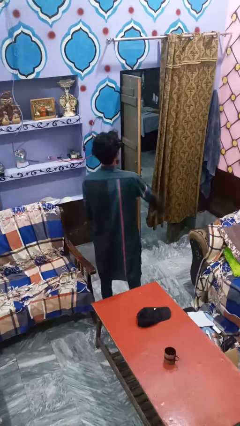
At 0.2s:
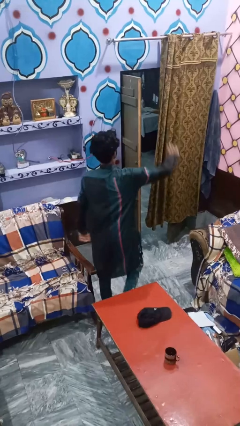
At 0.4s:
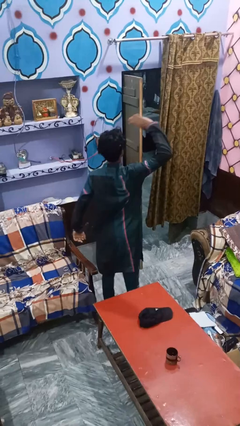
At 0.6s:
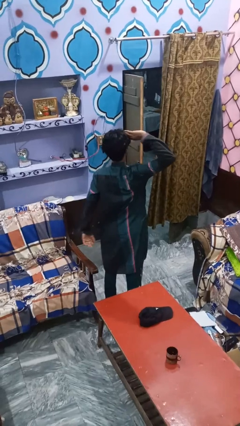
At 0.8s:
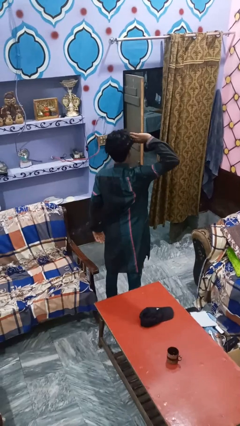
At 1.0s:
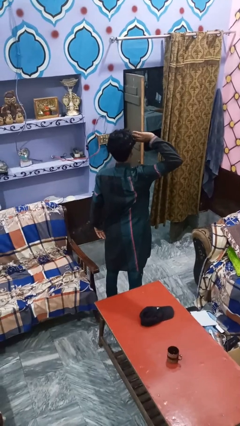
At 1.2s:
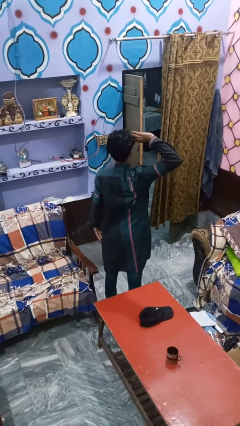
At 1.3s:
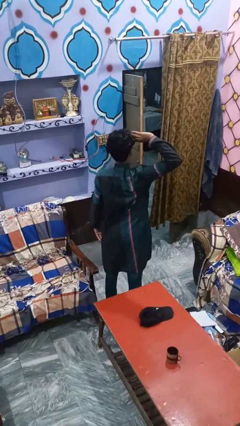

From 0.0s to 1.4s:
person salutes

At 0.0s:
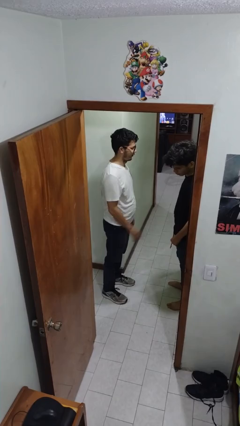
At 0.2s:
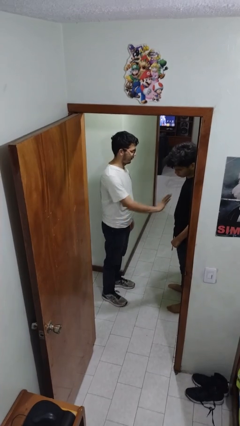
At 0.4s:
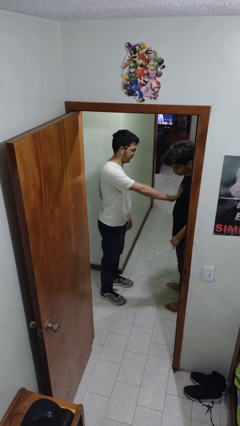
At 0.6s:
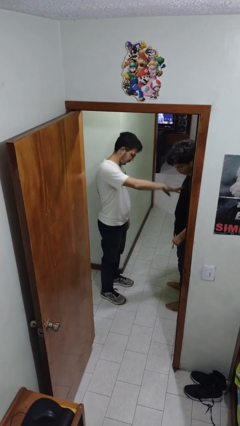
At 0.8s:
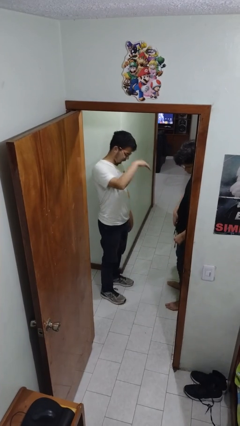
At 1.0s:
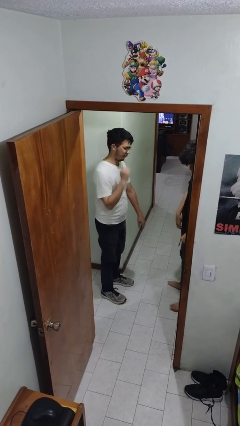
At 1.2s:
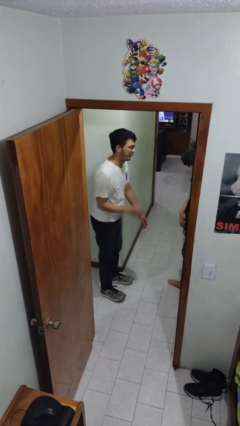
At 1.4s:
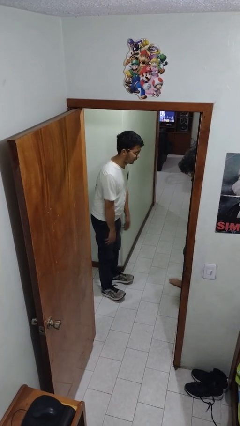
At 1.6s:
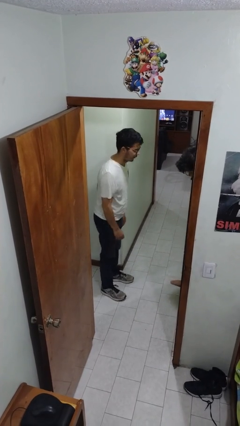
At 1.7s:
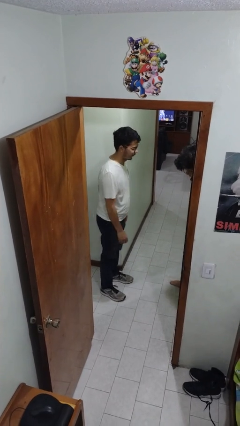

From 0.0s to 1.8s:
person shoves person

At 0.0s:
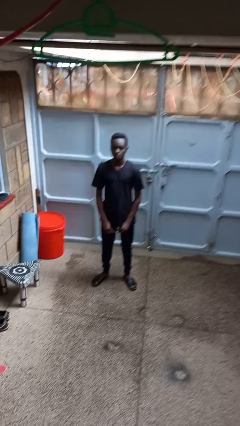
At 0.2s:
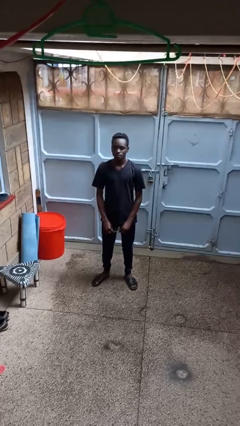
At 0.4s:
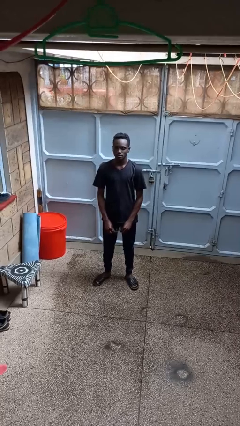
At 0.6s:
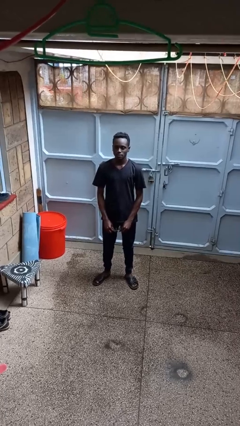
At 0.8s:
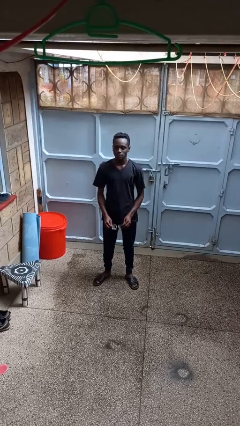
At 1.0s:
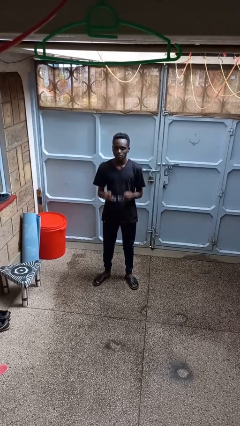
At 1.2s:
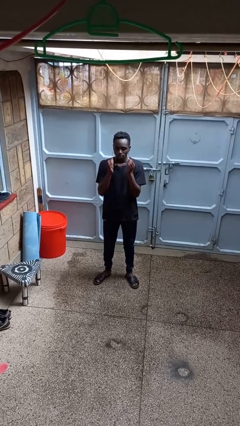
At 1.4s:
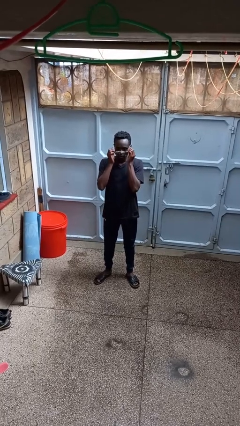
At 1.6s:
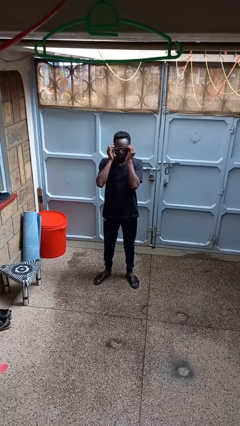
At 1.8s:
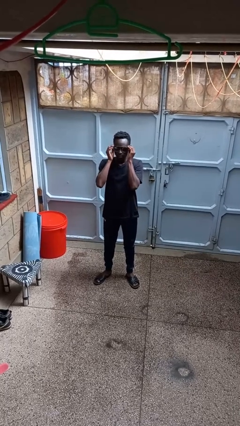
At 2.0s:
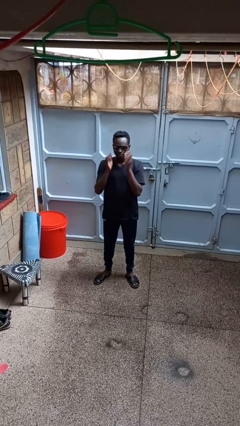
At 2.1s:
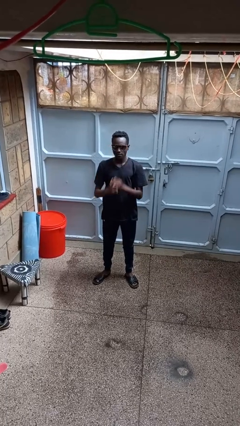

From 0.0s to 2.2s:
person puts on sunglasses

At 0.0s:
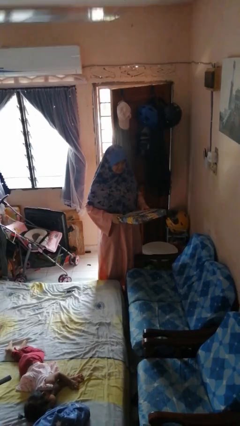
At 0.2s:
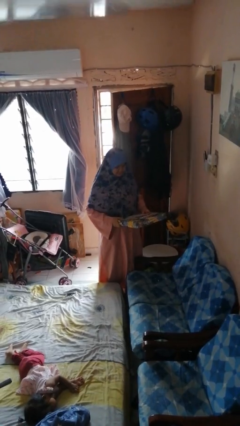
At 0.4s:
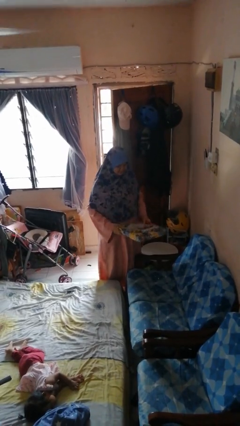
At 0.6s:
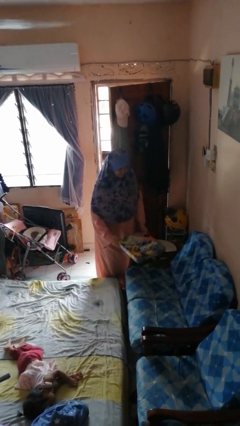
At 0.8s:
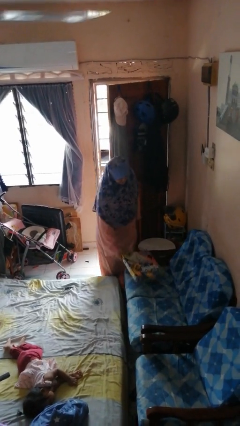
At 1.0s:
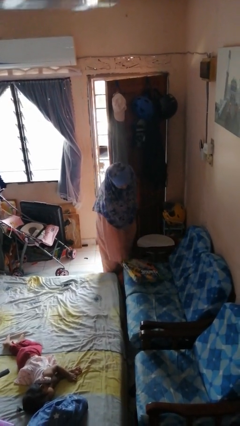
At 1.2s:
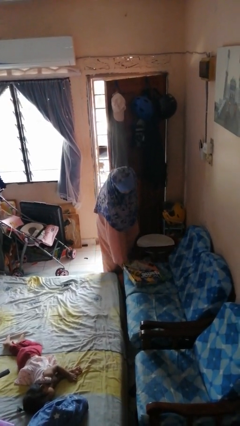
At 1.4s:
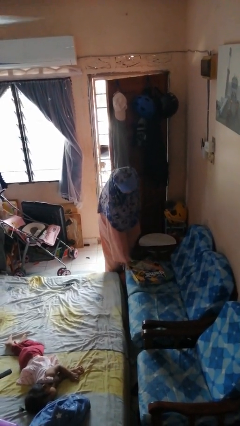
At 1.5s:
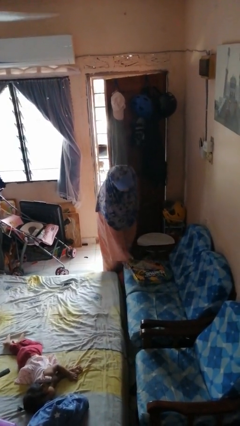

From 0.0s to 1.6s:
person puts down object on couch

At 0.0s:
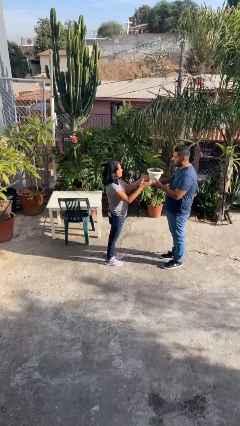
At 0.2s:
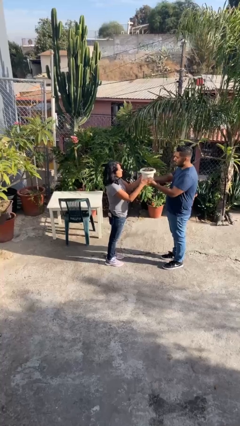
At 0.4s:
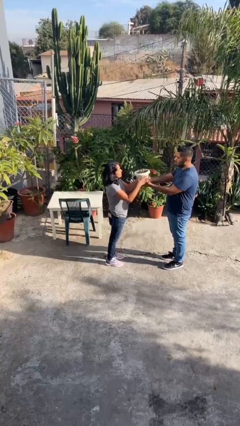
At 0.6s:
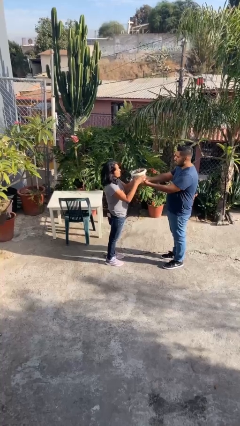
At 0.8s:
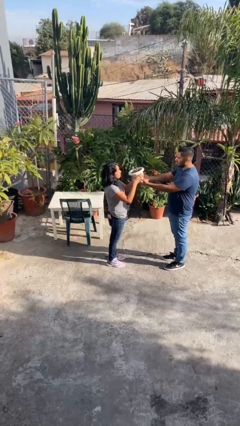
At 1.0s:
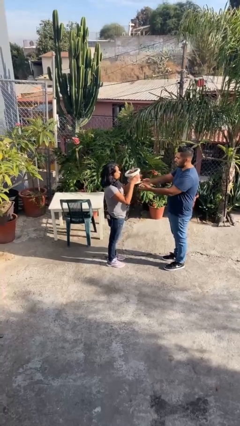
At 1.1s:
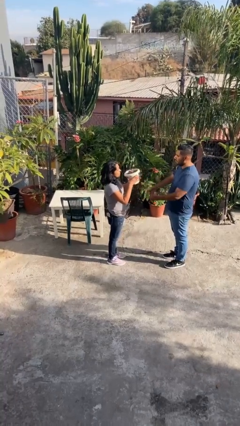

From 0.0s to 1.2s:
person transfers object to person

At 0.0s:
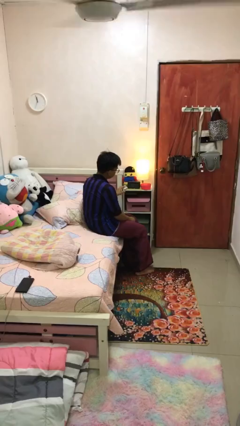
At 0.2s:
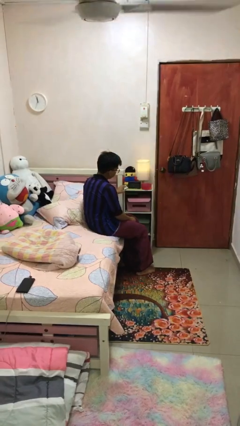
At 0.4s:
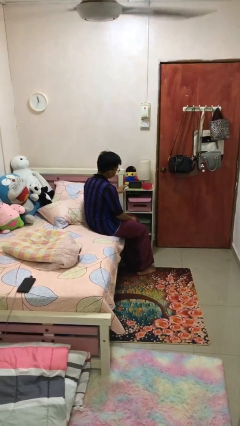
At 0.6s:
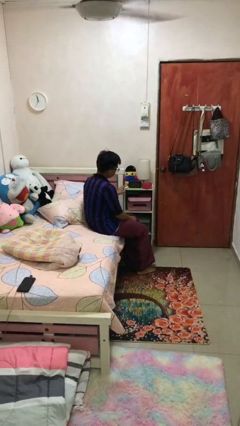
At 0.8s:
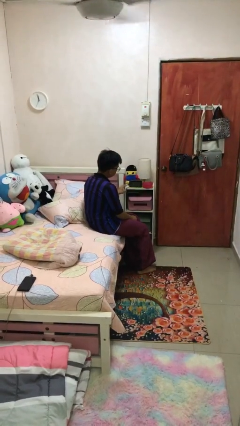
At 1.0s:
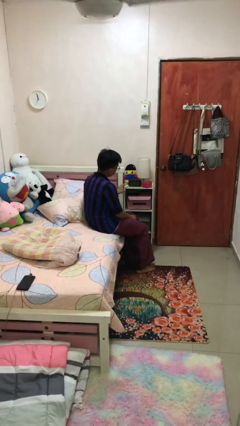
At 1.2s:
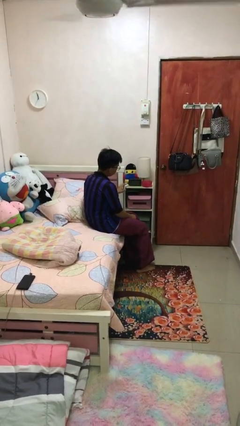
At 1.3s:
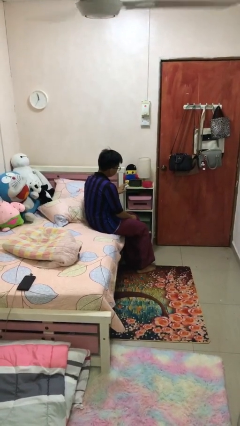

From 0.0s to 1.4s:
person turns off lamp

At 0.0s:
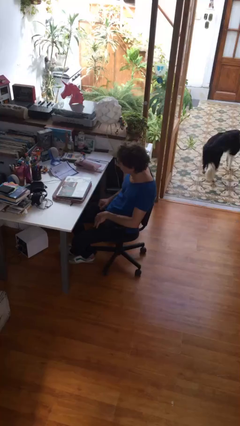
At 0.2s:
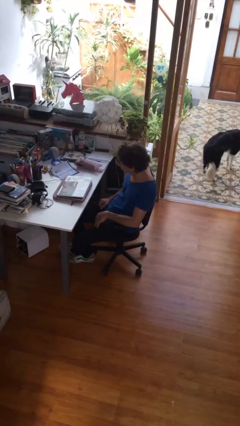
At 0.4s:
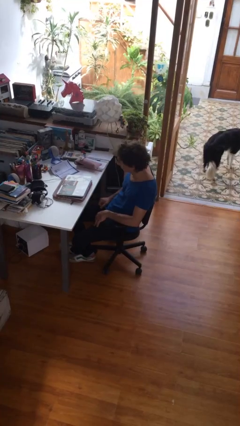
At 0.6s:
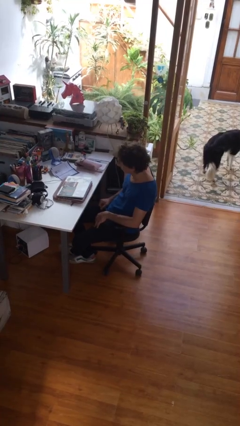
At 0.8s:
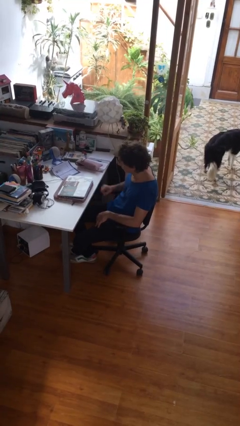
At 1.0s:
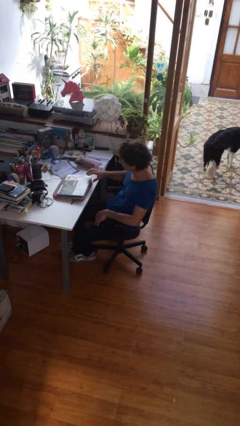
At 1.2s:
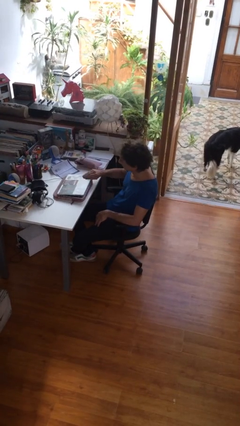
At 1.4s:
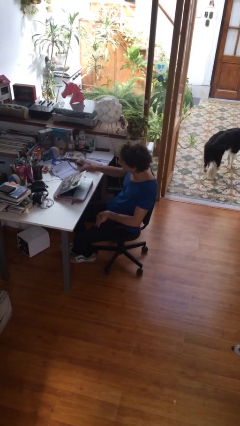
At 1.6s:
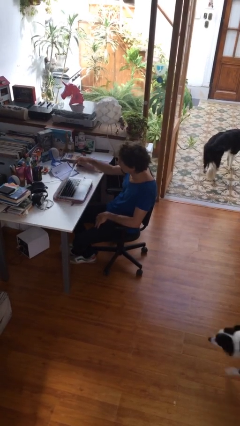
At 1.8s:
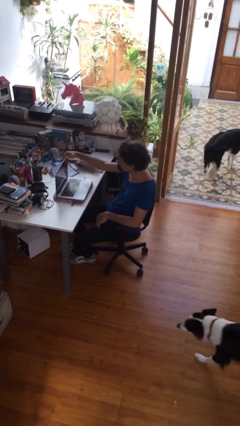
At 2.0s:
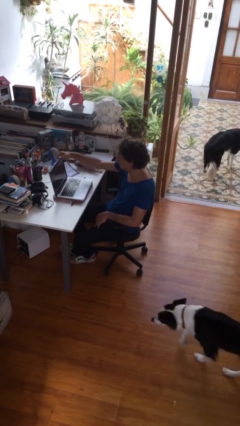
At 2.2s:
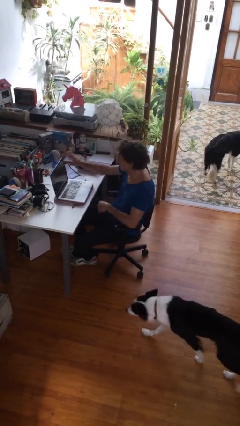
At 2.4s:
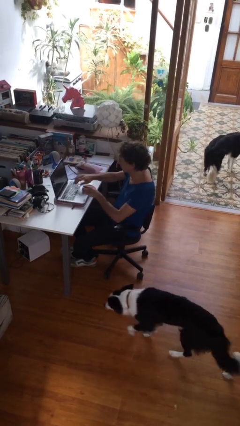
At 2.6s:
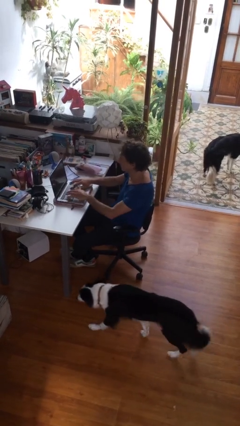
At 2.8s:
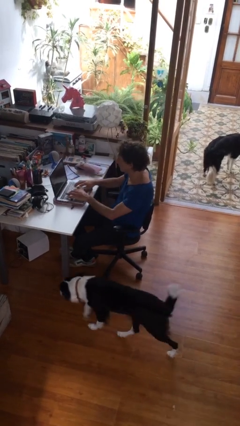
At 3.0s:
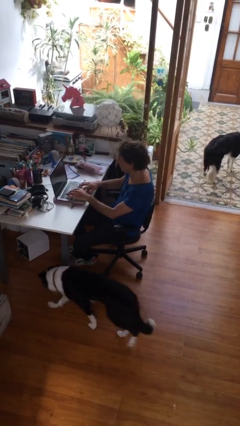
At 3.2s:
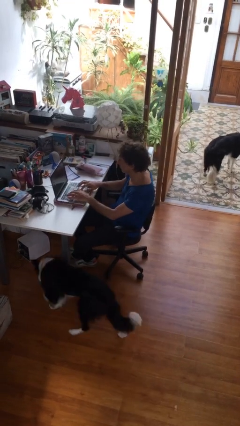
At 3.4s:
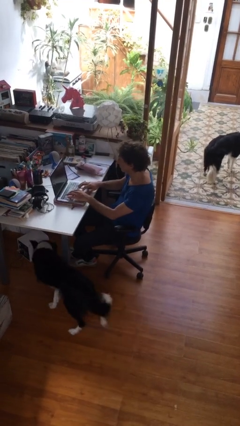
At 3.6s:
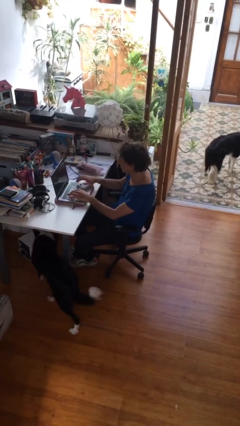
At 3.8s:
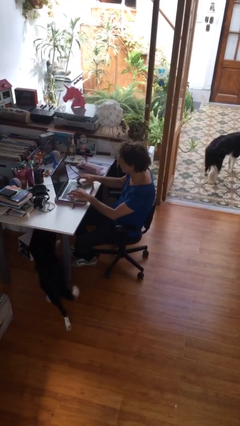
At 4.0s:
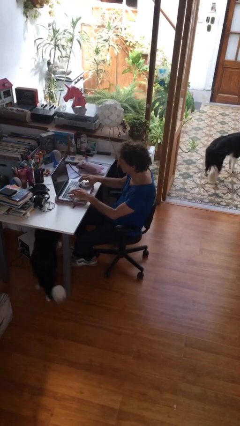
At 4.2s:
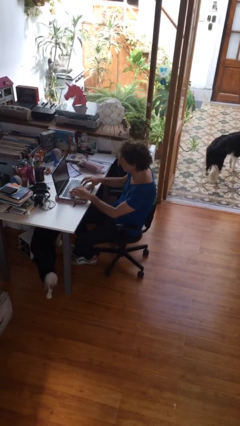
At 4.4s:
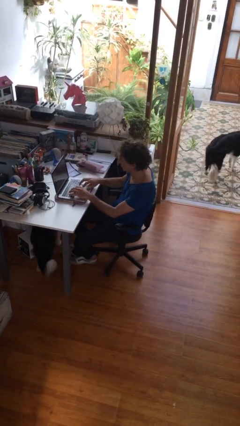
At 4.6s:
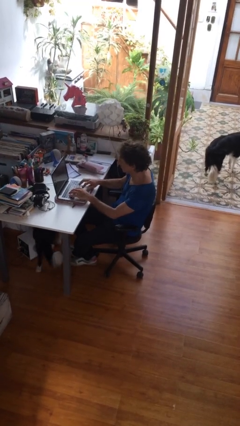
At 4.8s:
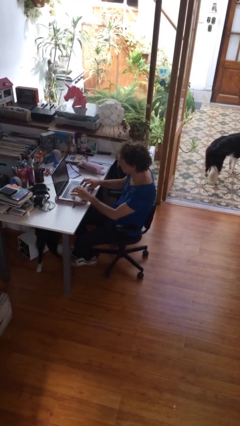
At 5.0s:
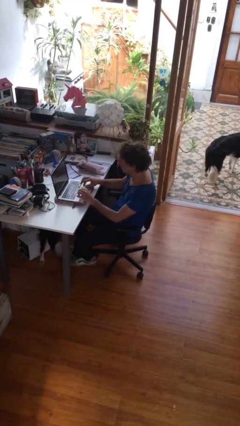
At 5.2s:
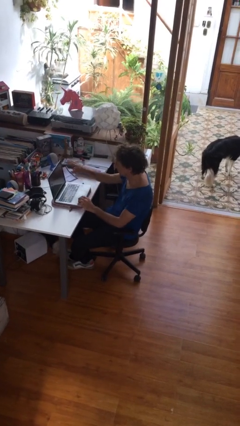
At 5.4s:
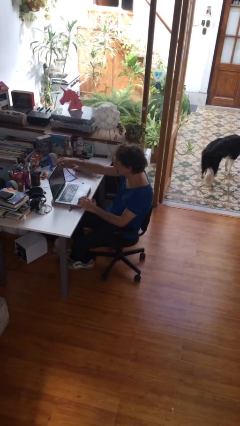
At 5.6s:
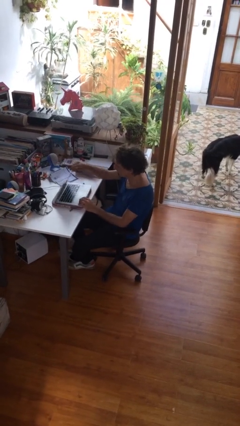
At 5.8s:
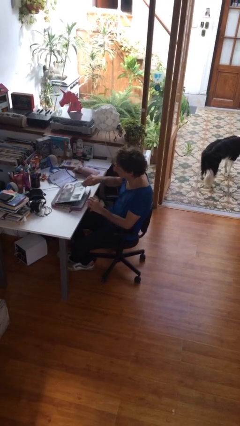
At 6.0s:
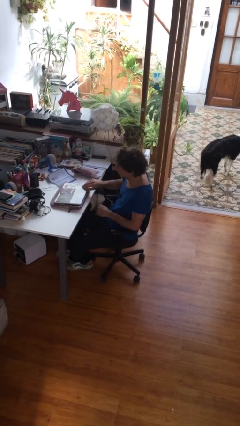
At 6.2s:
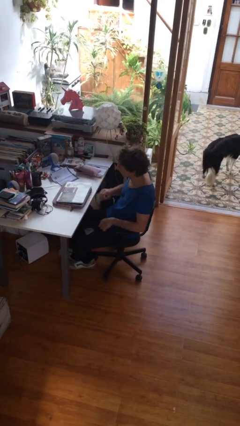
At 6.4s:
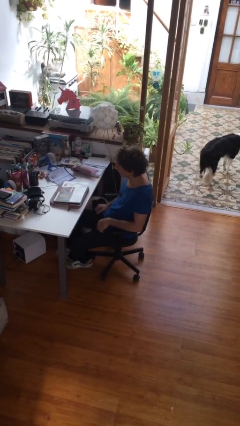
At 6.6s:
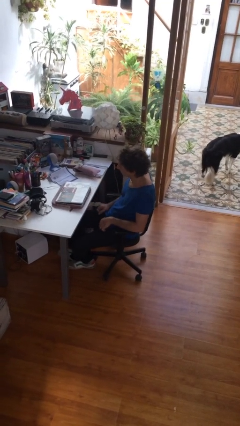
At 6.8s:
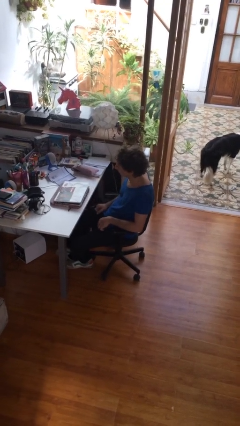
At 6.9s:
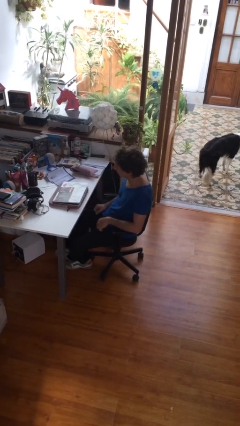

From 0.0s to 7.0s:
person interacts with laptop

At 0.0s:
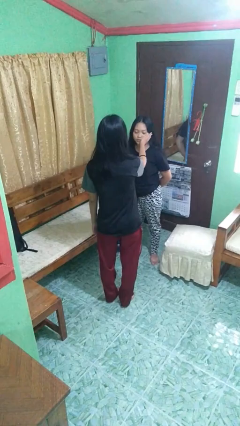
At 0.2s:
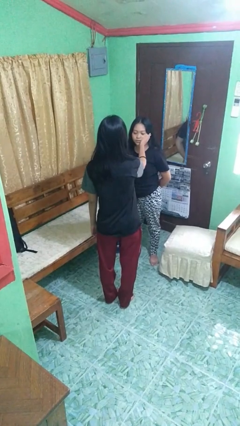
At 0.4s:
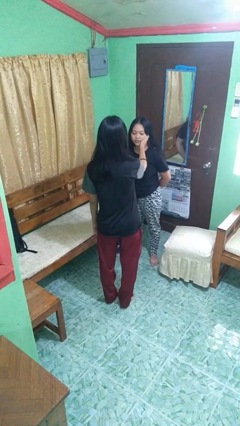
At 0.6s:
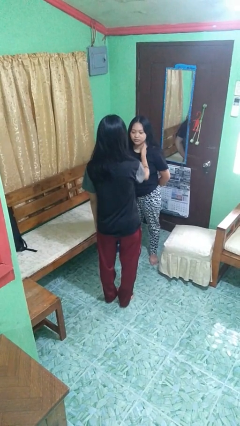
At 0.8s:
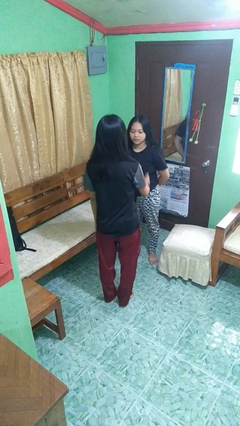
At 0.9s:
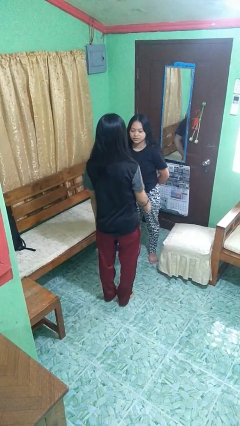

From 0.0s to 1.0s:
person touches face of person
